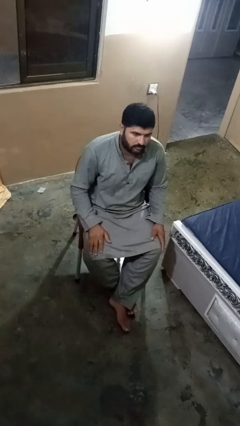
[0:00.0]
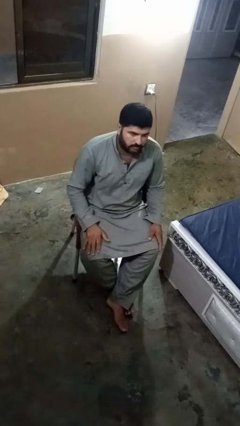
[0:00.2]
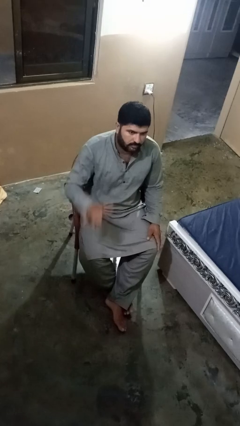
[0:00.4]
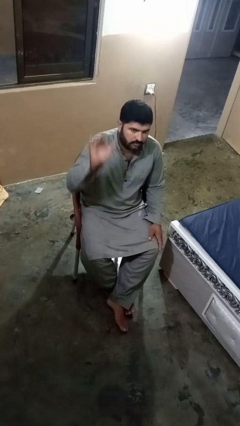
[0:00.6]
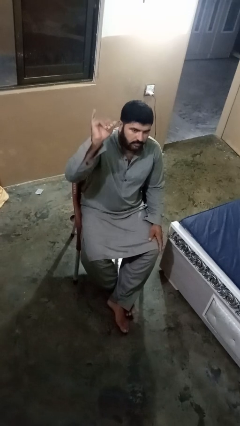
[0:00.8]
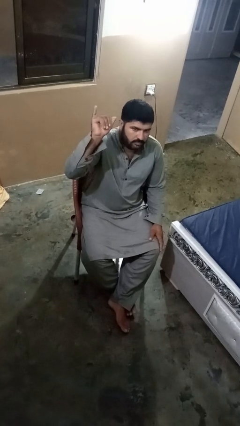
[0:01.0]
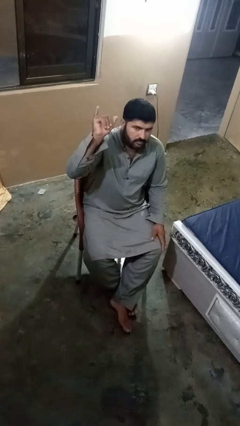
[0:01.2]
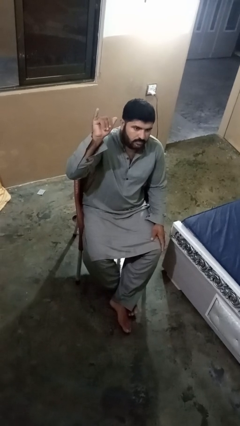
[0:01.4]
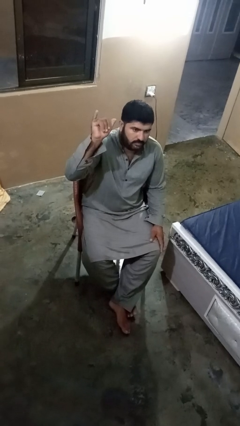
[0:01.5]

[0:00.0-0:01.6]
person gestures hang loose

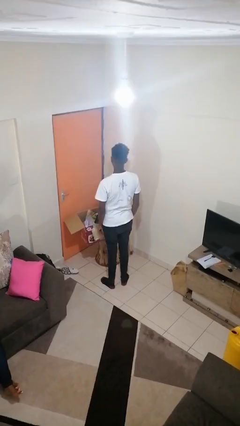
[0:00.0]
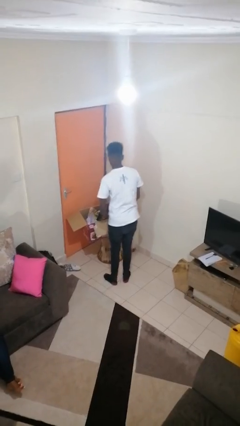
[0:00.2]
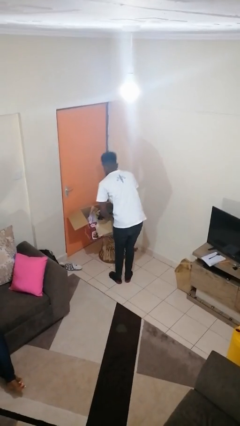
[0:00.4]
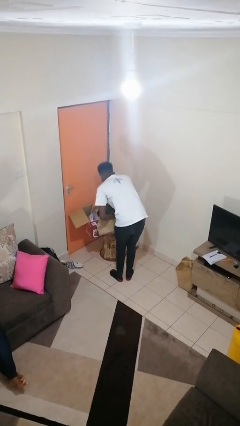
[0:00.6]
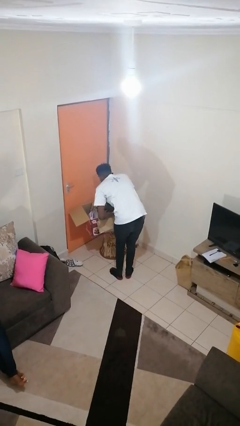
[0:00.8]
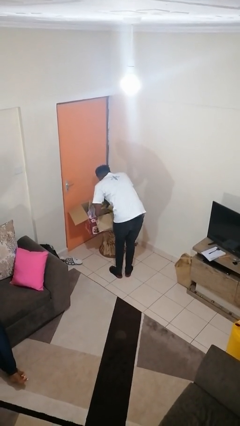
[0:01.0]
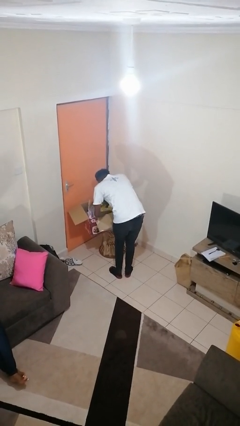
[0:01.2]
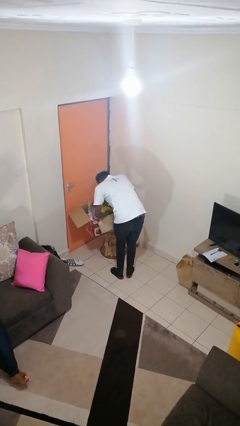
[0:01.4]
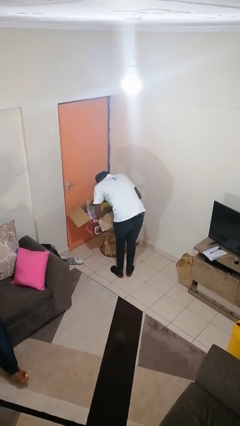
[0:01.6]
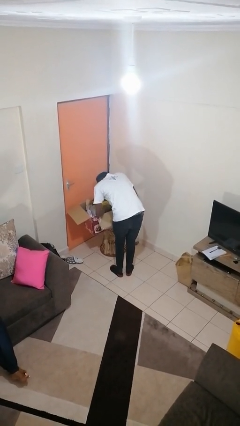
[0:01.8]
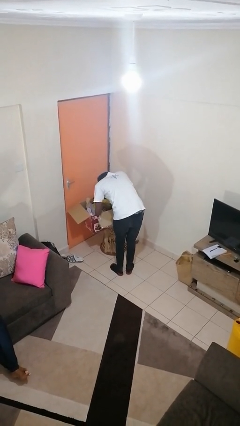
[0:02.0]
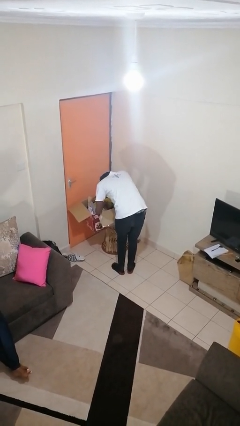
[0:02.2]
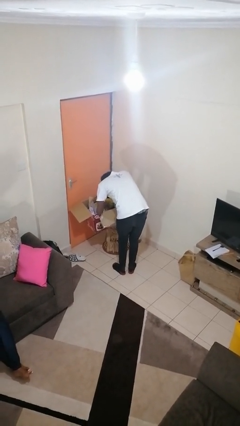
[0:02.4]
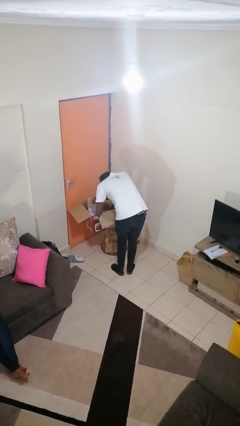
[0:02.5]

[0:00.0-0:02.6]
person searches in box

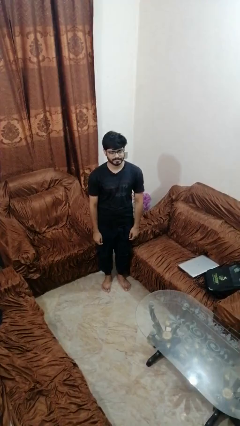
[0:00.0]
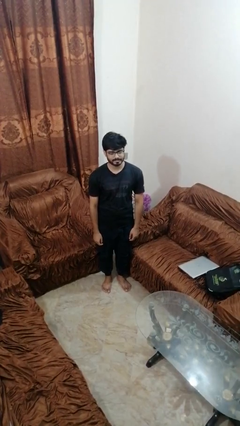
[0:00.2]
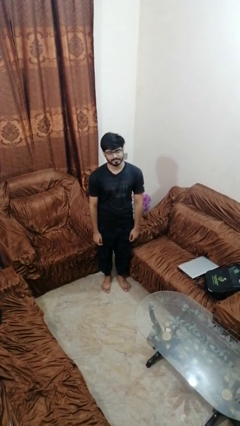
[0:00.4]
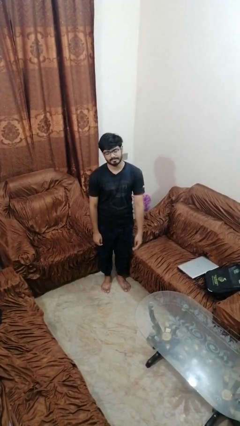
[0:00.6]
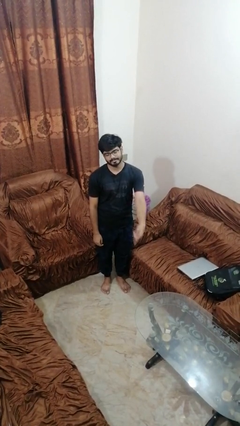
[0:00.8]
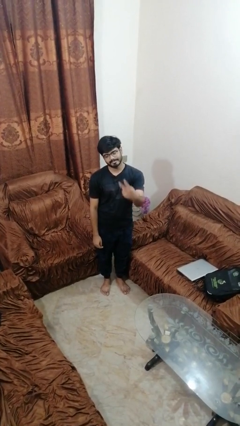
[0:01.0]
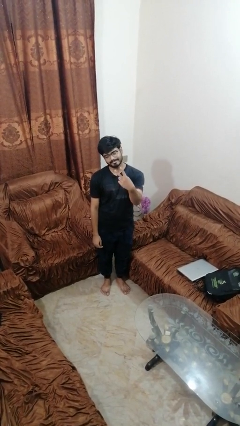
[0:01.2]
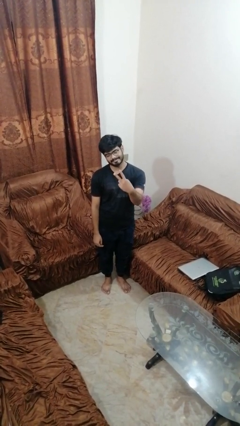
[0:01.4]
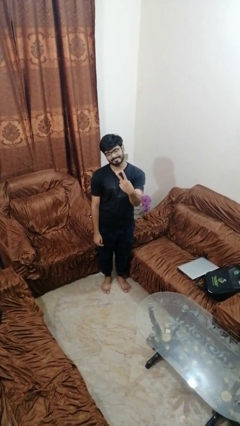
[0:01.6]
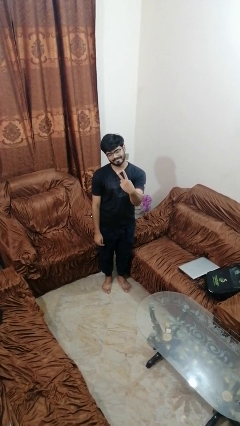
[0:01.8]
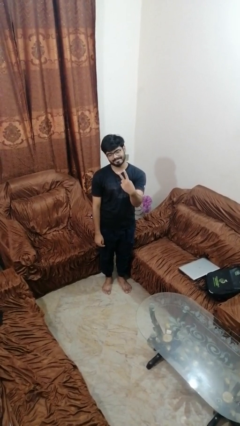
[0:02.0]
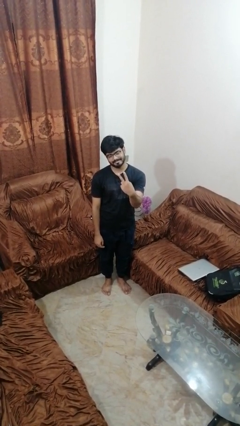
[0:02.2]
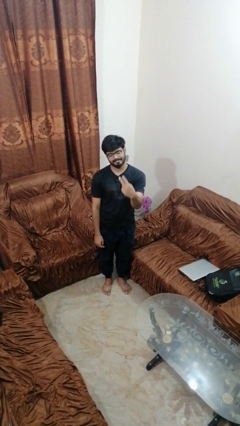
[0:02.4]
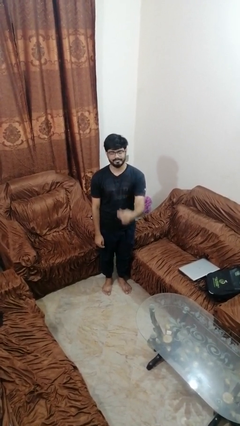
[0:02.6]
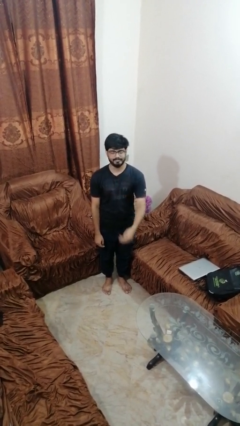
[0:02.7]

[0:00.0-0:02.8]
person gestures peace

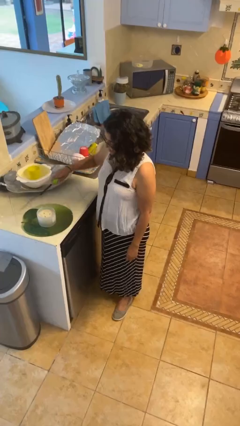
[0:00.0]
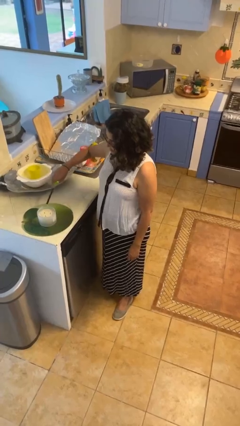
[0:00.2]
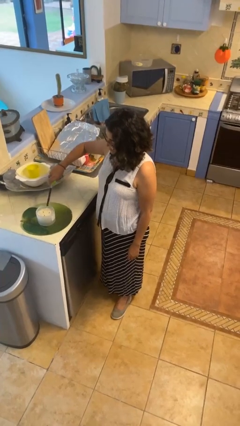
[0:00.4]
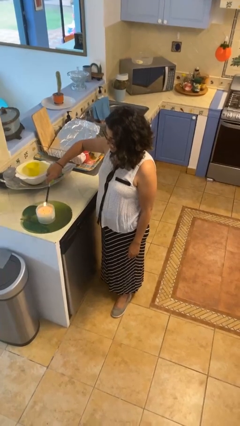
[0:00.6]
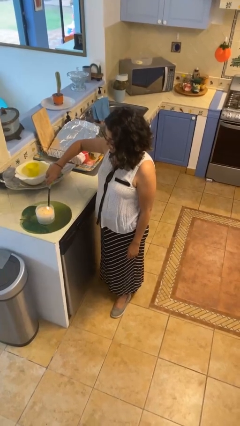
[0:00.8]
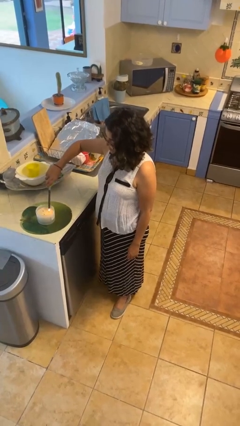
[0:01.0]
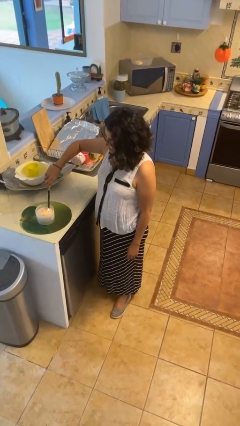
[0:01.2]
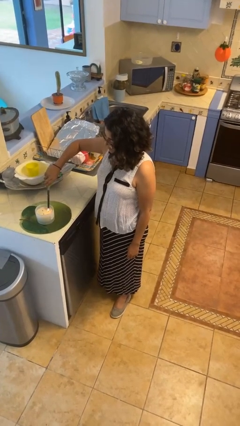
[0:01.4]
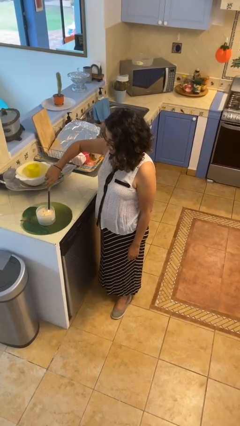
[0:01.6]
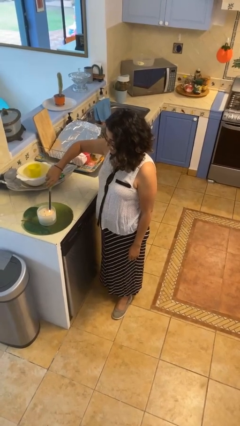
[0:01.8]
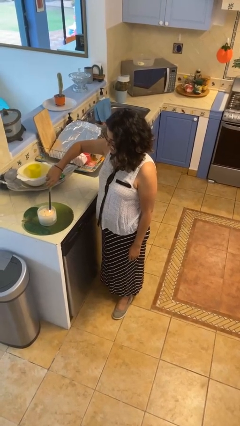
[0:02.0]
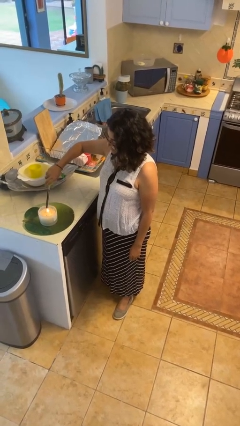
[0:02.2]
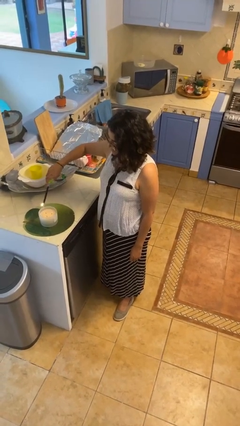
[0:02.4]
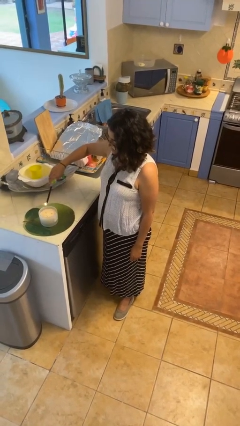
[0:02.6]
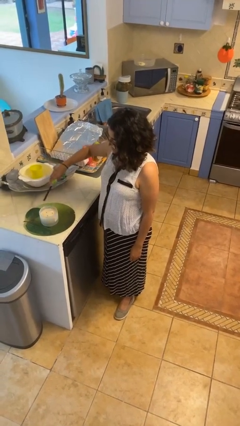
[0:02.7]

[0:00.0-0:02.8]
person lights candle

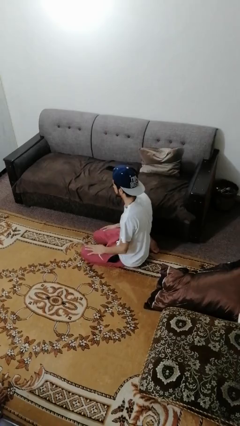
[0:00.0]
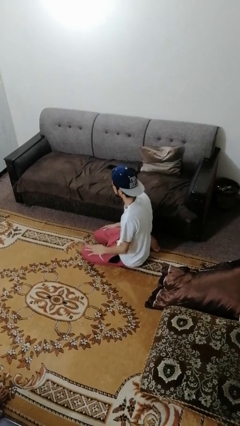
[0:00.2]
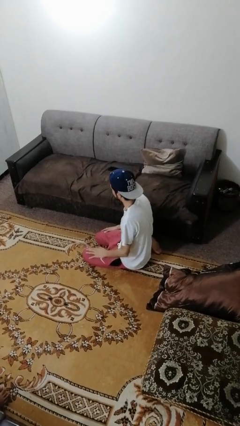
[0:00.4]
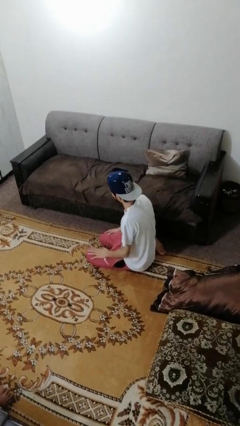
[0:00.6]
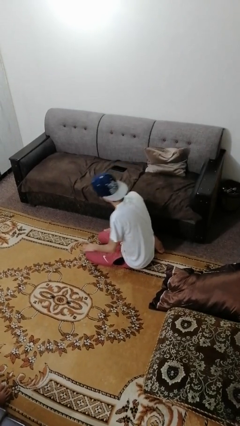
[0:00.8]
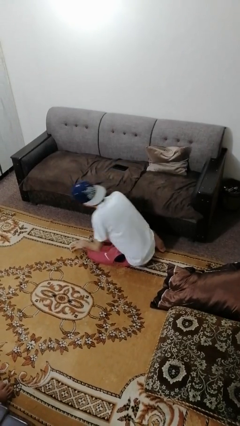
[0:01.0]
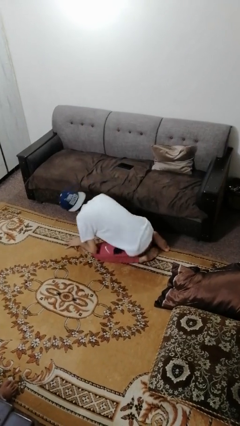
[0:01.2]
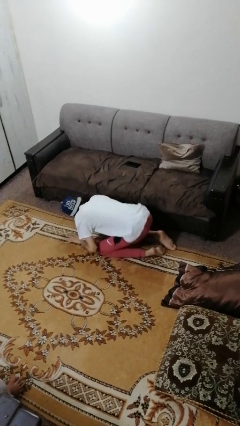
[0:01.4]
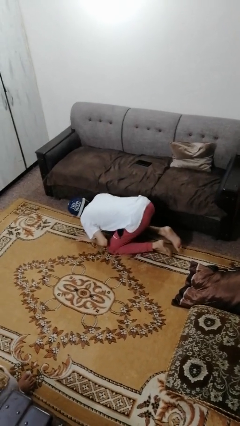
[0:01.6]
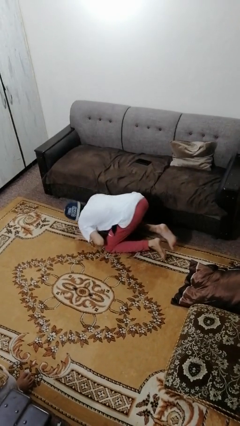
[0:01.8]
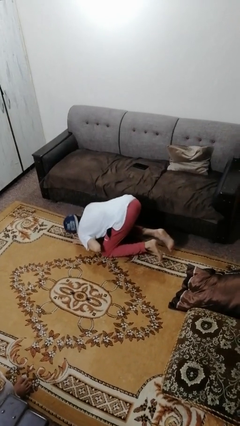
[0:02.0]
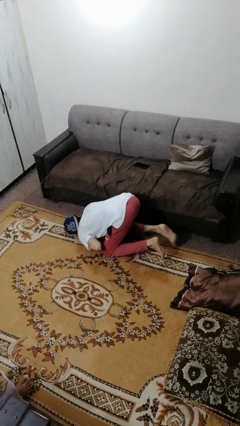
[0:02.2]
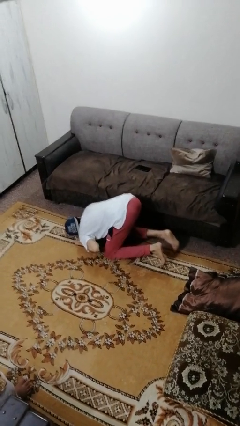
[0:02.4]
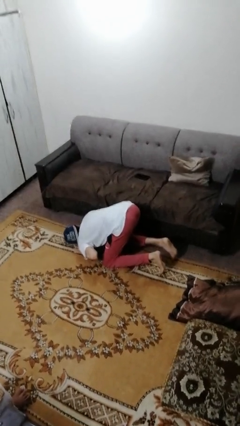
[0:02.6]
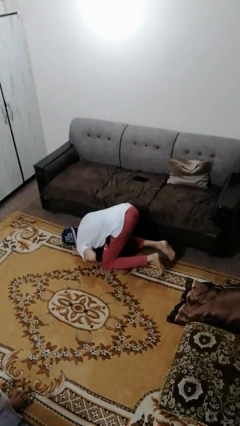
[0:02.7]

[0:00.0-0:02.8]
person searches under couch

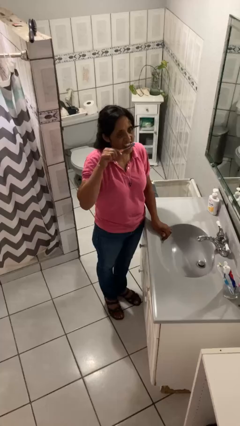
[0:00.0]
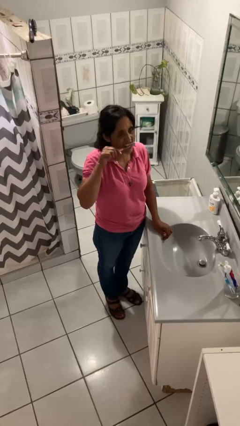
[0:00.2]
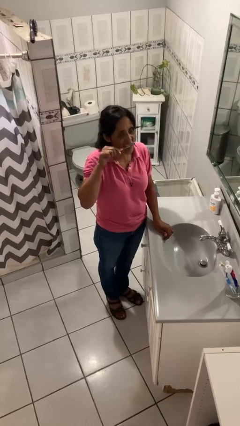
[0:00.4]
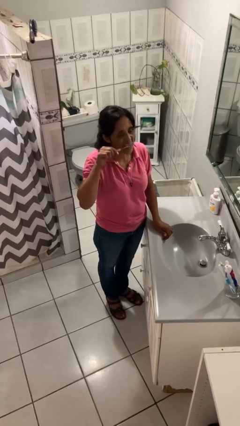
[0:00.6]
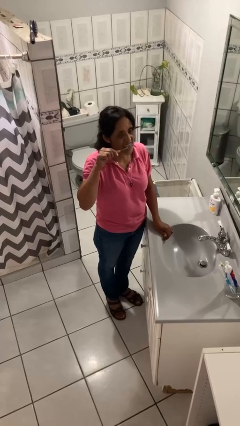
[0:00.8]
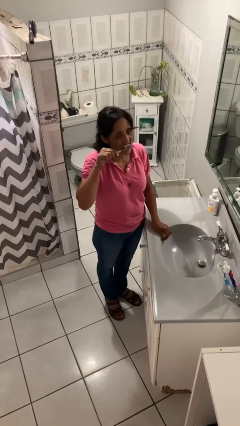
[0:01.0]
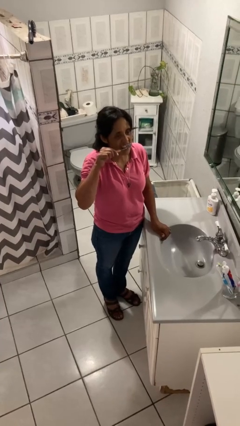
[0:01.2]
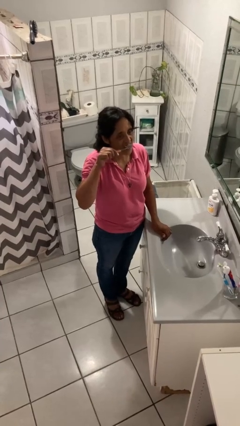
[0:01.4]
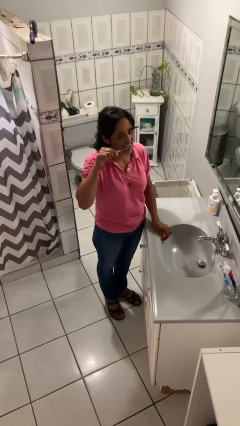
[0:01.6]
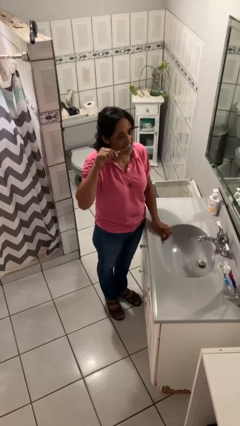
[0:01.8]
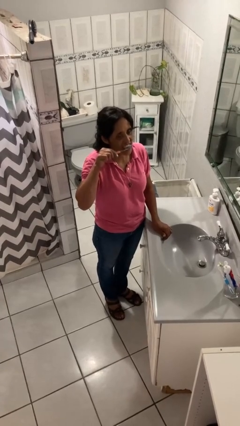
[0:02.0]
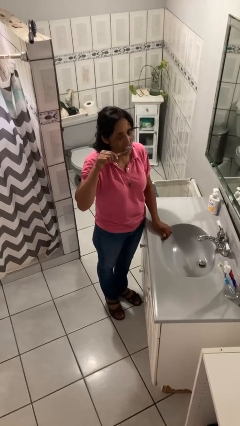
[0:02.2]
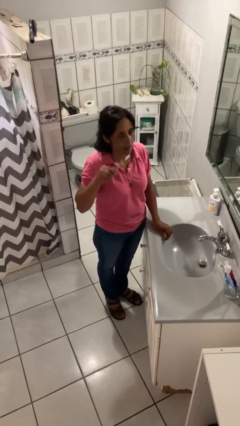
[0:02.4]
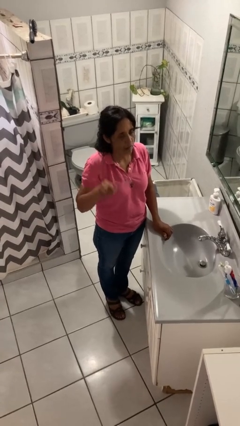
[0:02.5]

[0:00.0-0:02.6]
person brushes teeth

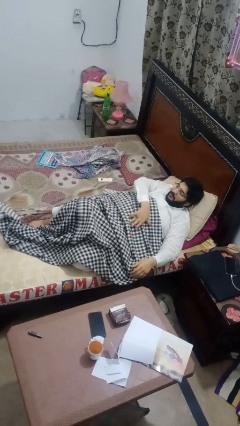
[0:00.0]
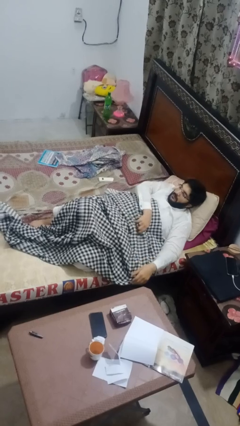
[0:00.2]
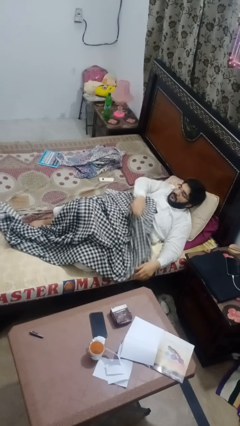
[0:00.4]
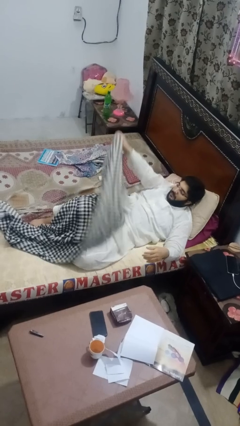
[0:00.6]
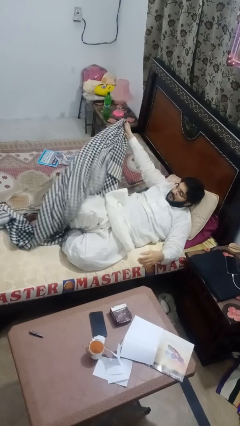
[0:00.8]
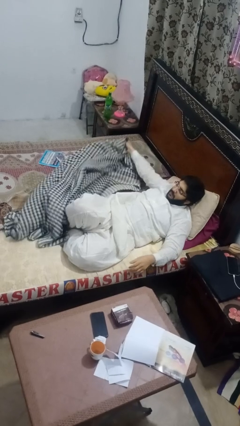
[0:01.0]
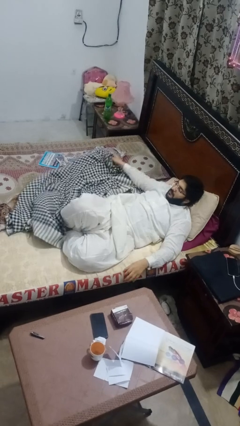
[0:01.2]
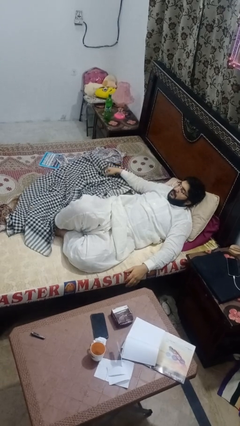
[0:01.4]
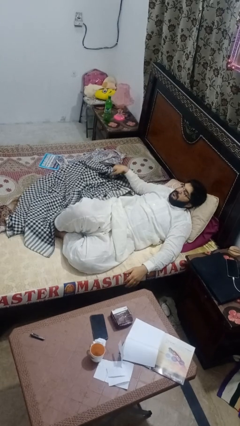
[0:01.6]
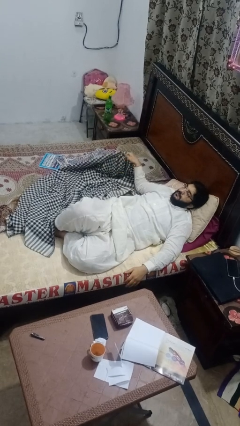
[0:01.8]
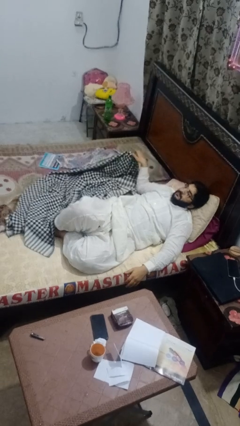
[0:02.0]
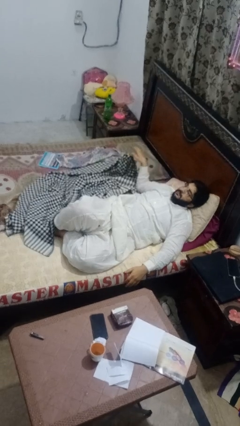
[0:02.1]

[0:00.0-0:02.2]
person uncovers with blanket
